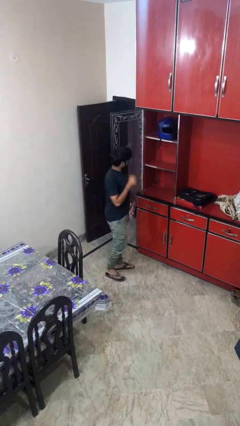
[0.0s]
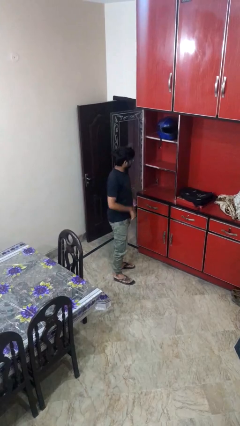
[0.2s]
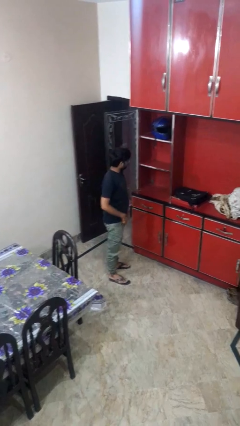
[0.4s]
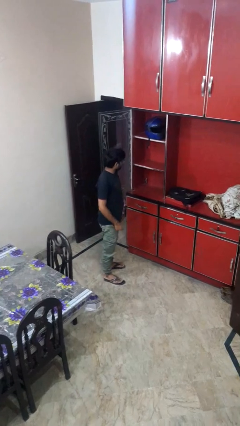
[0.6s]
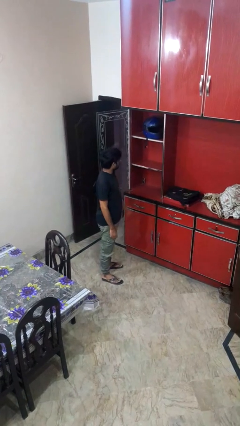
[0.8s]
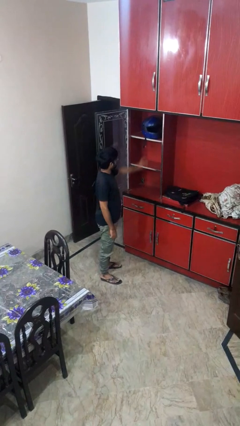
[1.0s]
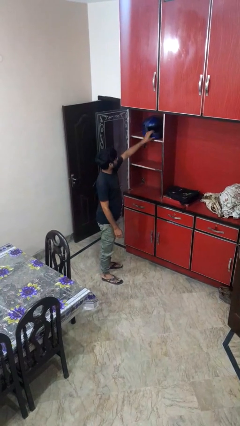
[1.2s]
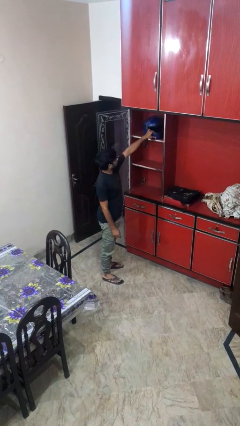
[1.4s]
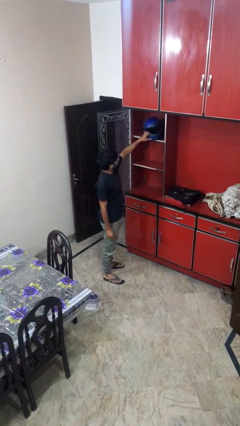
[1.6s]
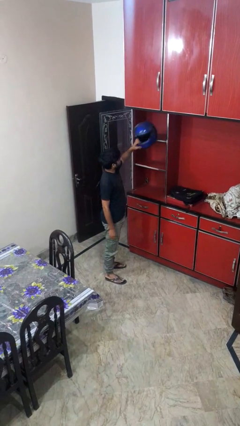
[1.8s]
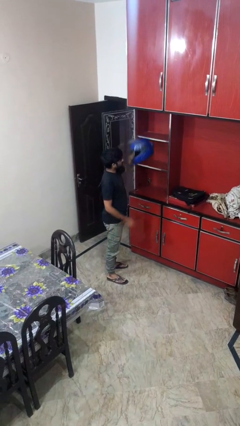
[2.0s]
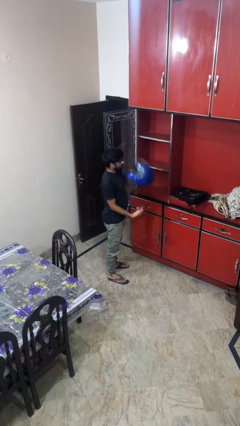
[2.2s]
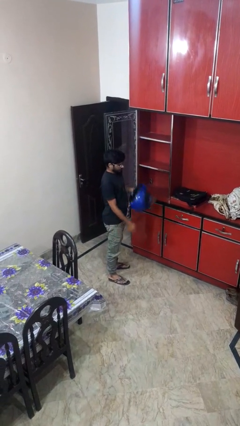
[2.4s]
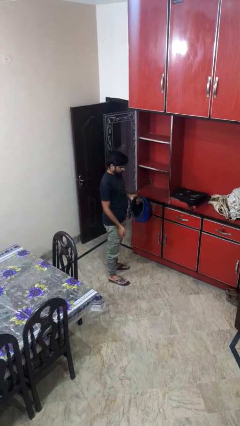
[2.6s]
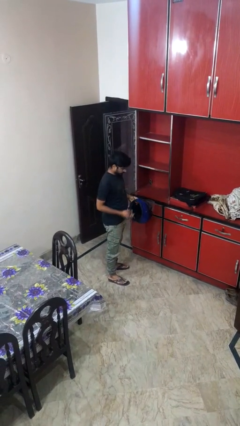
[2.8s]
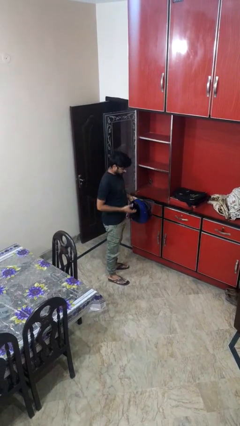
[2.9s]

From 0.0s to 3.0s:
person picks up object from shelf

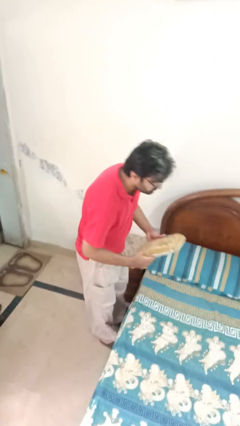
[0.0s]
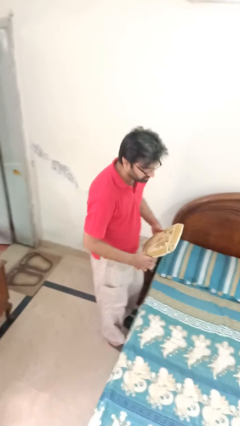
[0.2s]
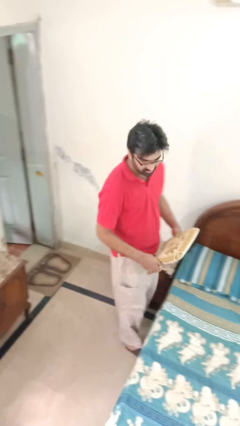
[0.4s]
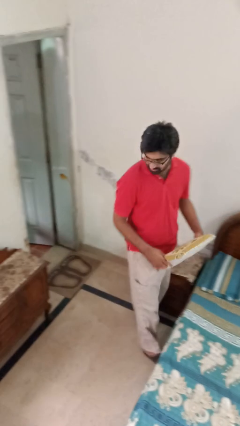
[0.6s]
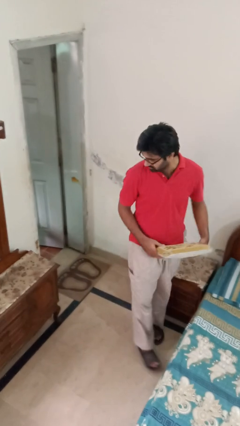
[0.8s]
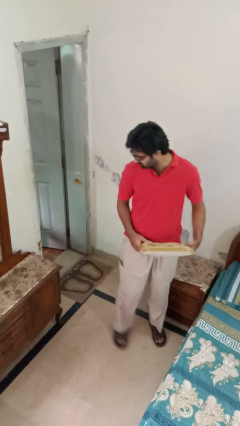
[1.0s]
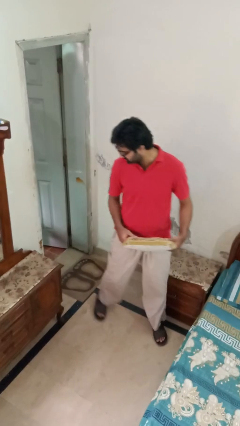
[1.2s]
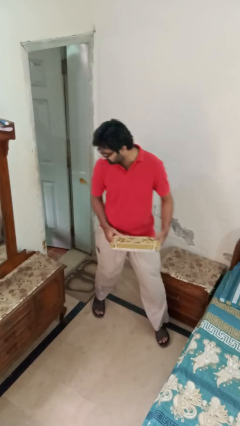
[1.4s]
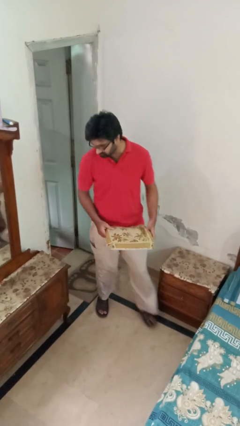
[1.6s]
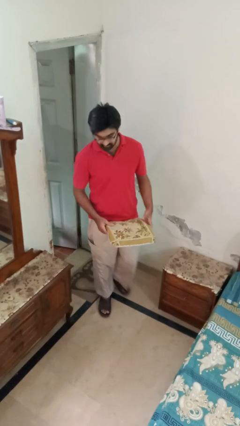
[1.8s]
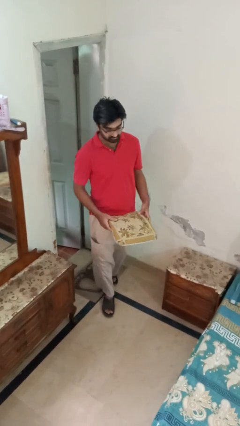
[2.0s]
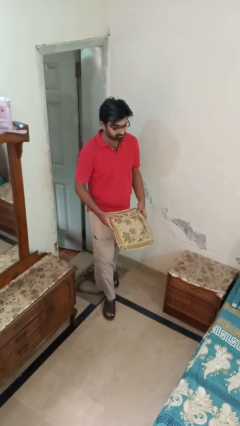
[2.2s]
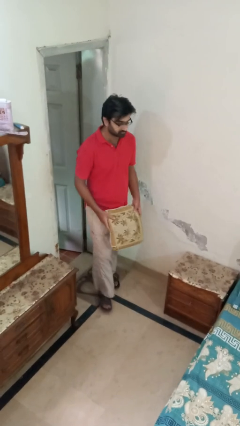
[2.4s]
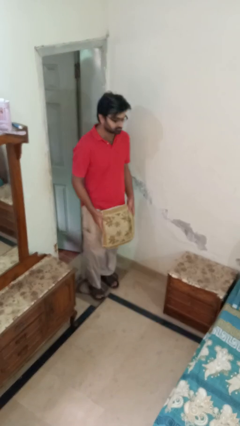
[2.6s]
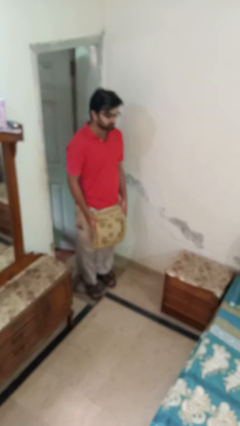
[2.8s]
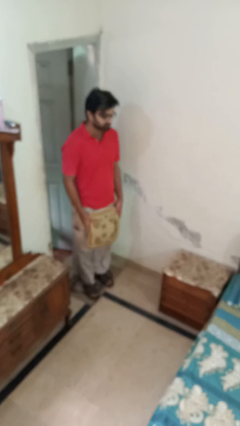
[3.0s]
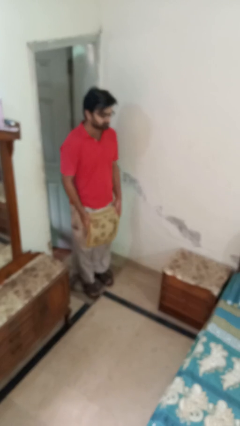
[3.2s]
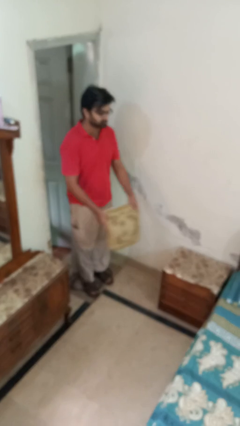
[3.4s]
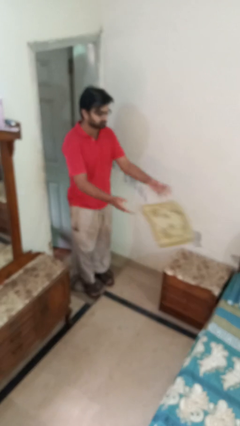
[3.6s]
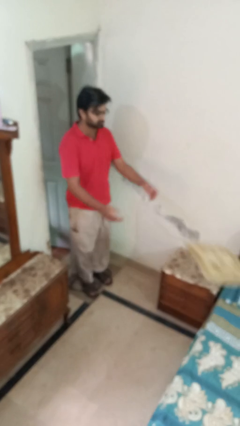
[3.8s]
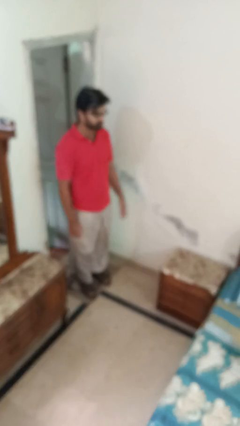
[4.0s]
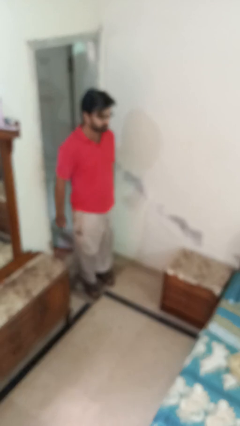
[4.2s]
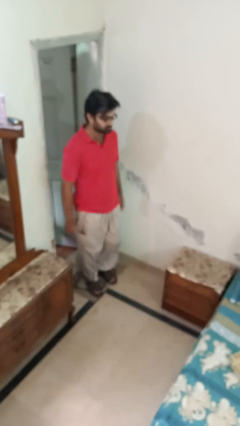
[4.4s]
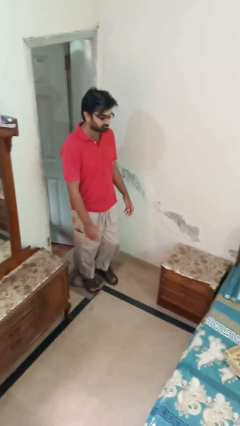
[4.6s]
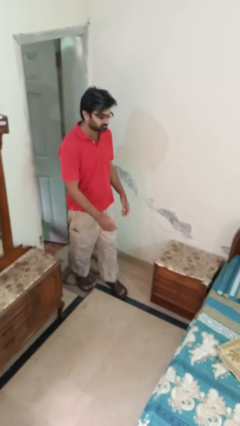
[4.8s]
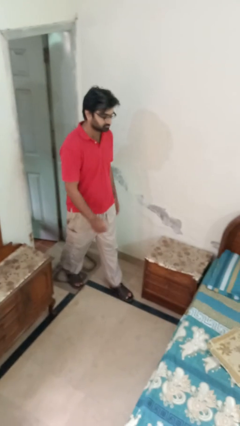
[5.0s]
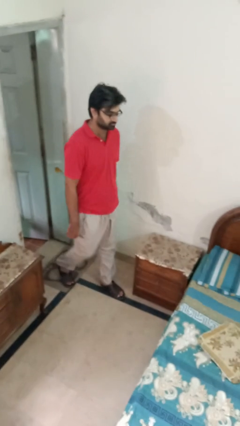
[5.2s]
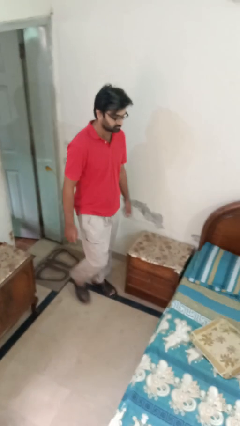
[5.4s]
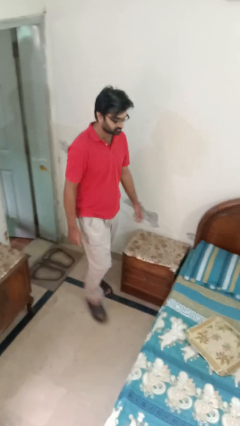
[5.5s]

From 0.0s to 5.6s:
person throws object on bed

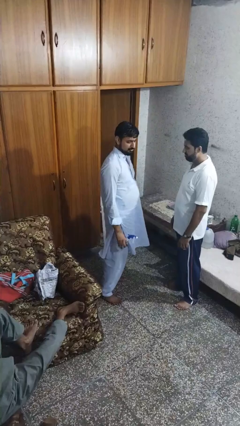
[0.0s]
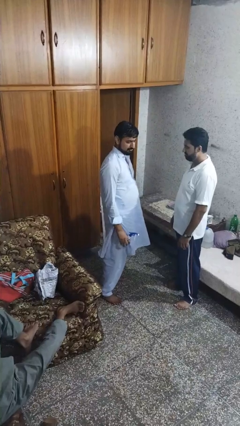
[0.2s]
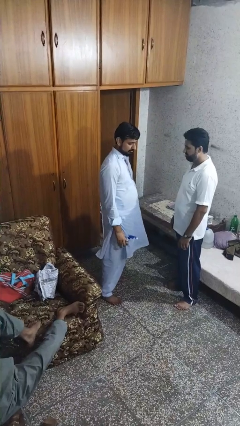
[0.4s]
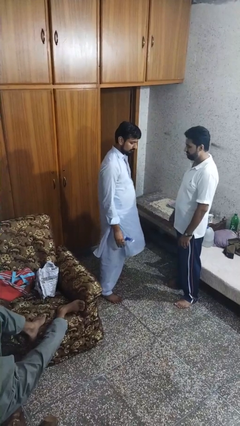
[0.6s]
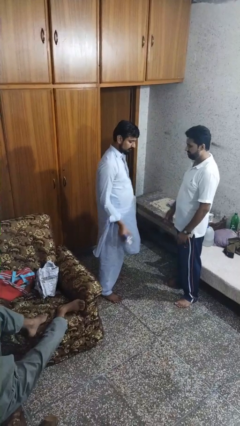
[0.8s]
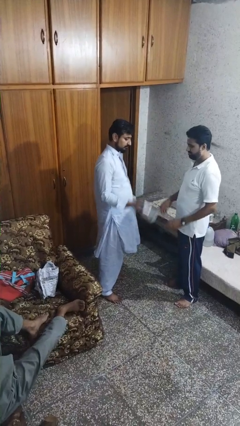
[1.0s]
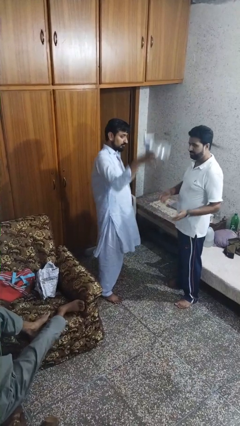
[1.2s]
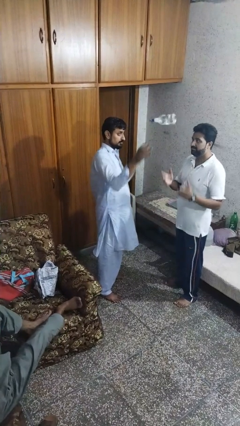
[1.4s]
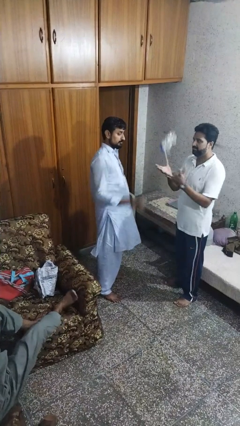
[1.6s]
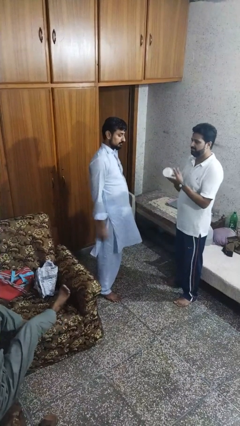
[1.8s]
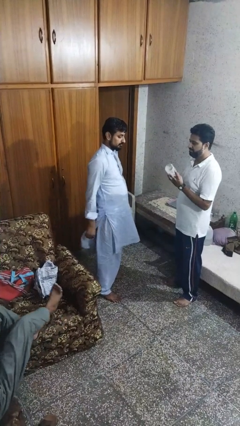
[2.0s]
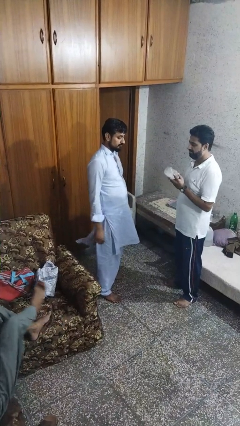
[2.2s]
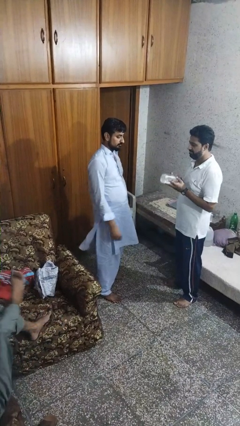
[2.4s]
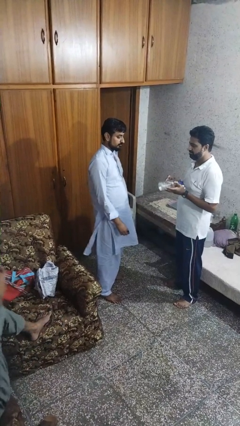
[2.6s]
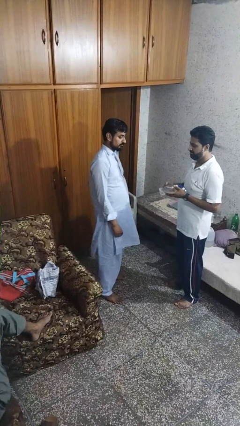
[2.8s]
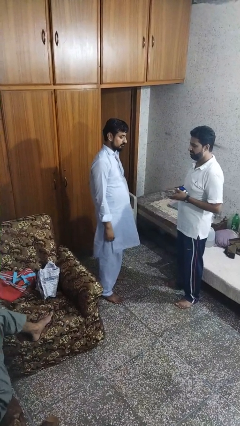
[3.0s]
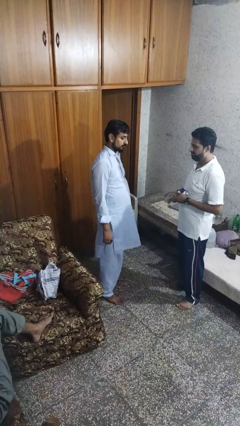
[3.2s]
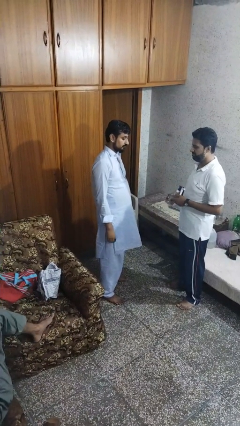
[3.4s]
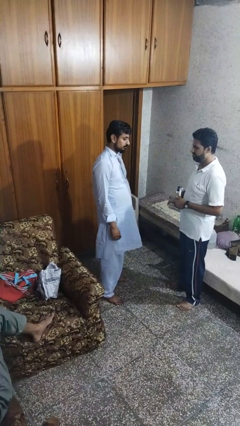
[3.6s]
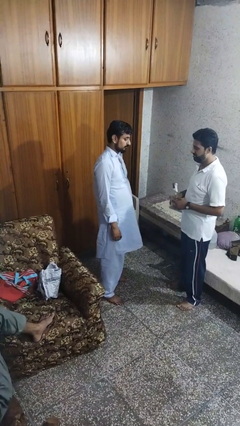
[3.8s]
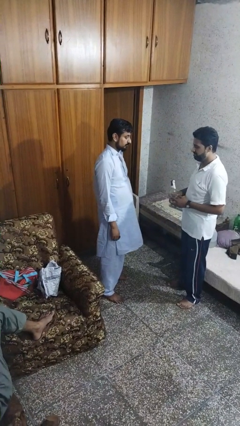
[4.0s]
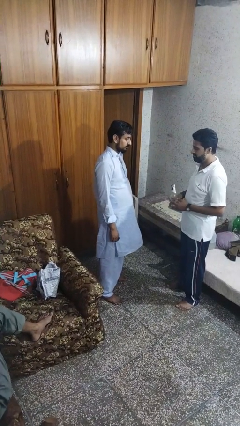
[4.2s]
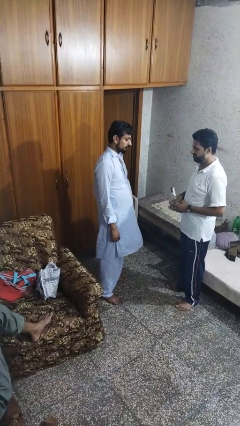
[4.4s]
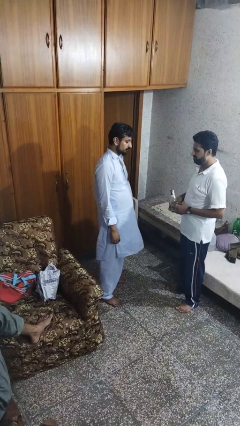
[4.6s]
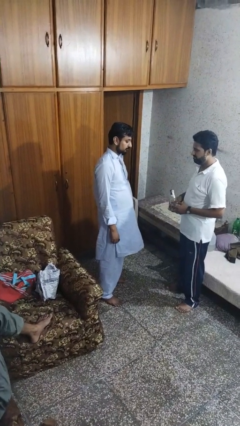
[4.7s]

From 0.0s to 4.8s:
person throws object to person

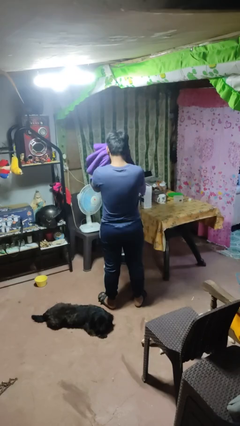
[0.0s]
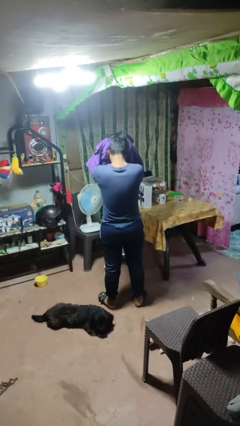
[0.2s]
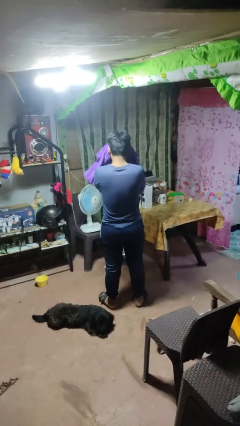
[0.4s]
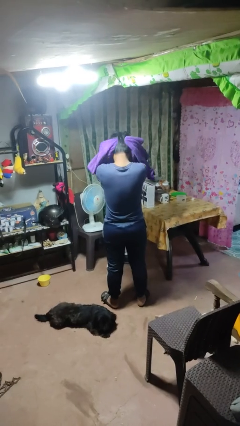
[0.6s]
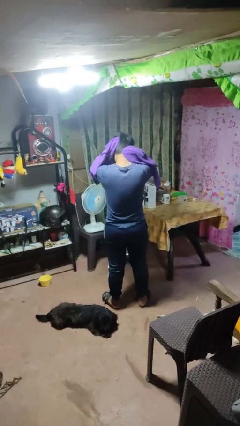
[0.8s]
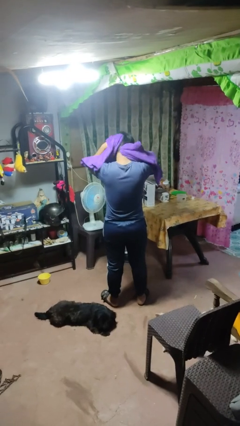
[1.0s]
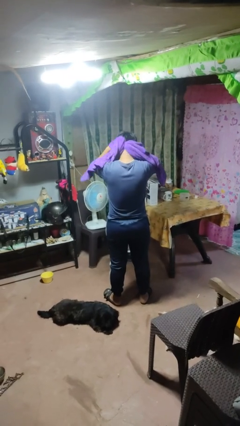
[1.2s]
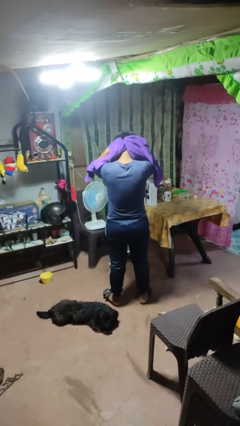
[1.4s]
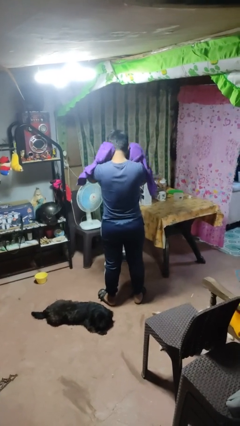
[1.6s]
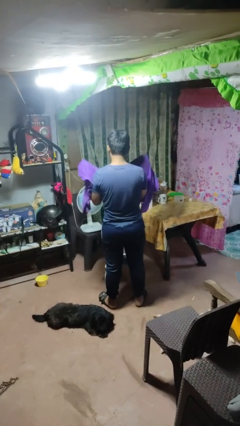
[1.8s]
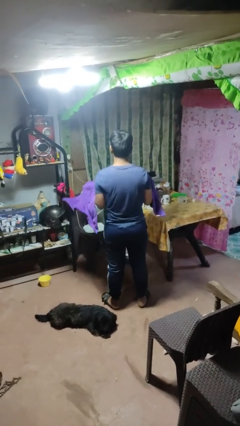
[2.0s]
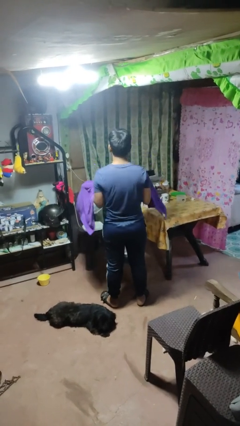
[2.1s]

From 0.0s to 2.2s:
person dries hair with towel

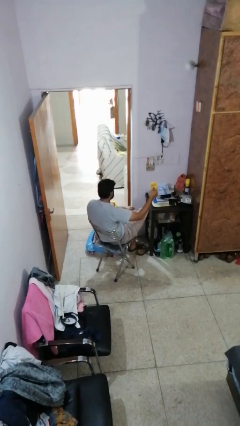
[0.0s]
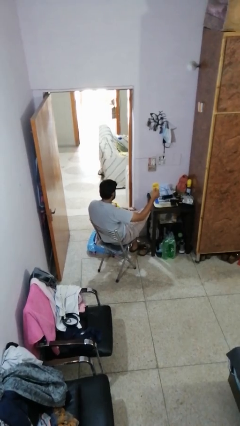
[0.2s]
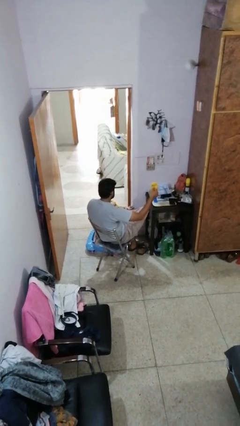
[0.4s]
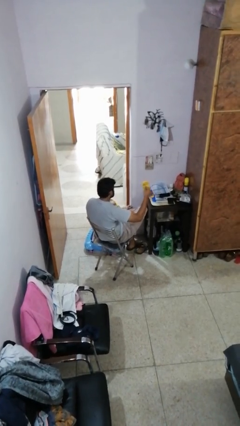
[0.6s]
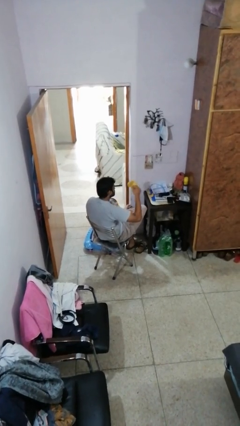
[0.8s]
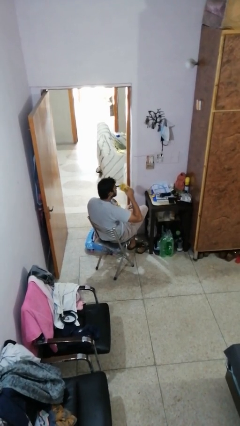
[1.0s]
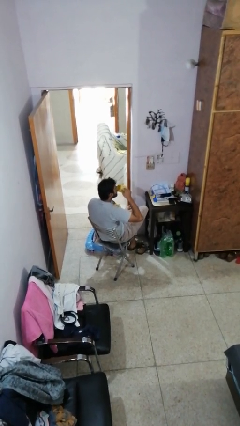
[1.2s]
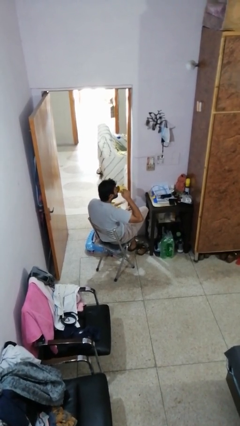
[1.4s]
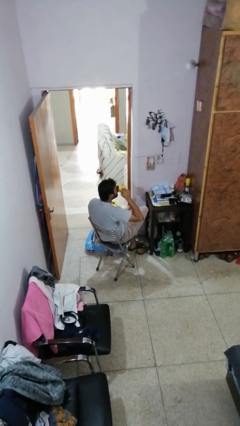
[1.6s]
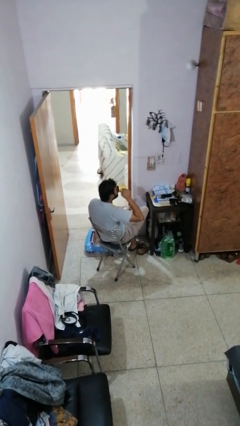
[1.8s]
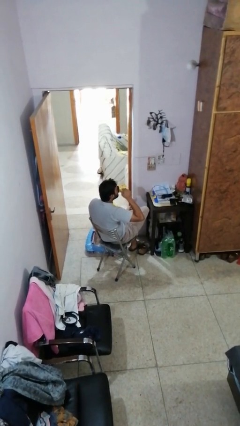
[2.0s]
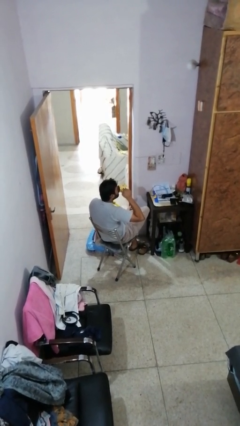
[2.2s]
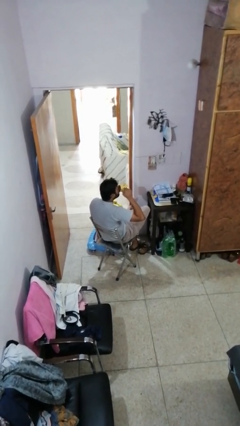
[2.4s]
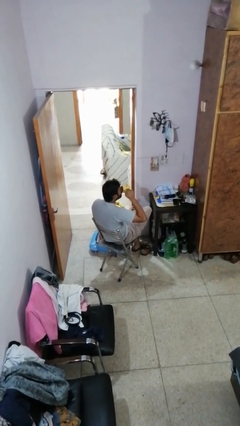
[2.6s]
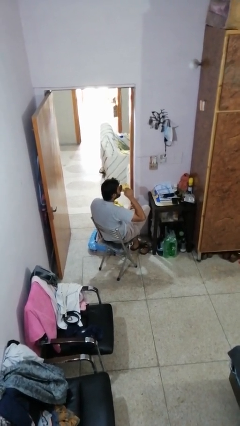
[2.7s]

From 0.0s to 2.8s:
person drinks from mug
